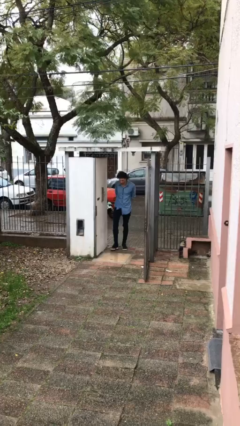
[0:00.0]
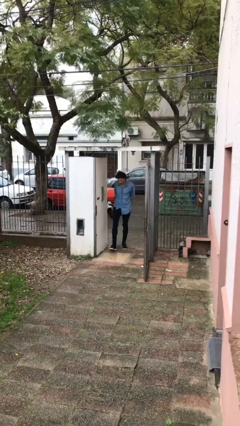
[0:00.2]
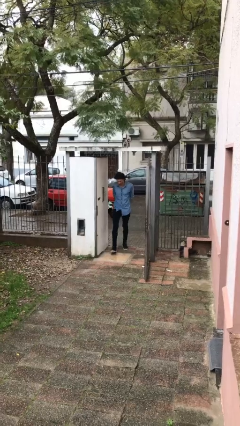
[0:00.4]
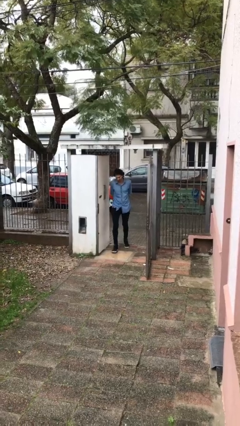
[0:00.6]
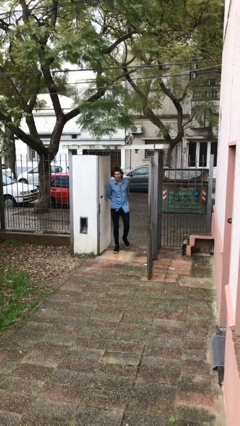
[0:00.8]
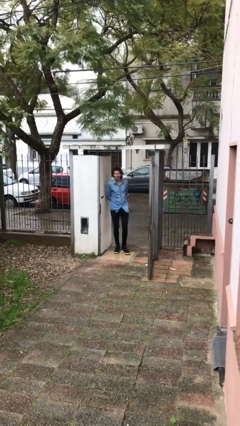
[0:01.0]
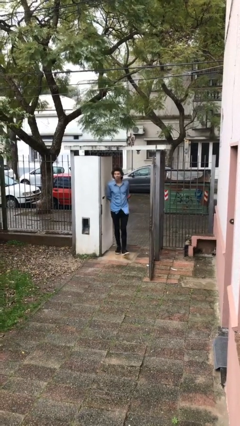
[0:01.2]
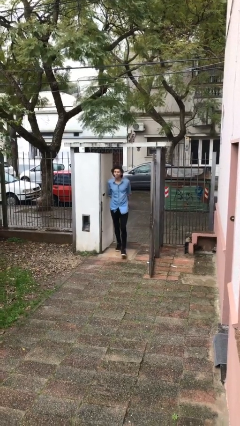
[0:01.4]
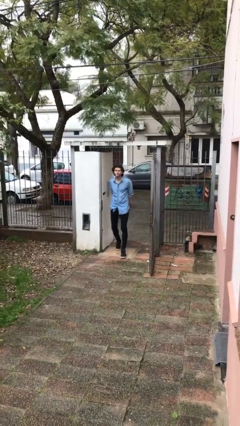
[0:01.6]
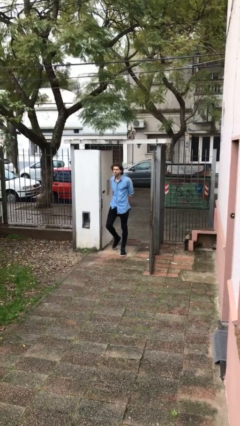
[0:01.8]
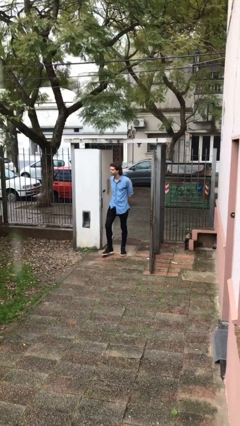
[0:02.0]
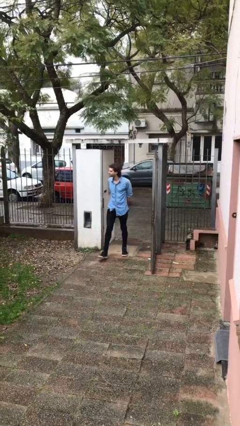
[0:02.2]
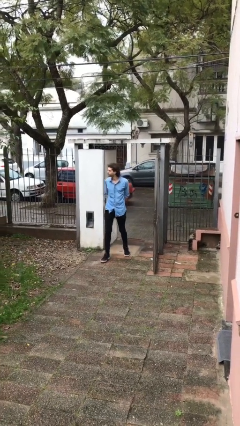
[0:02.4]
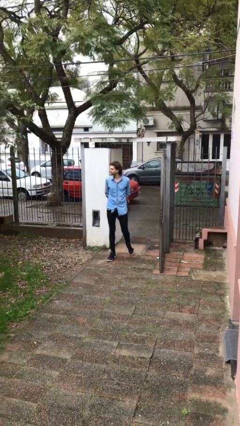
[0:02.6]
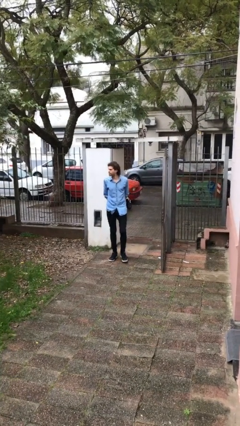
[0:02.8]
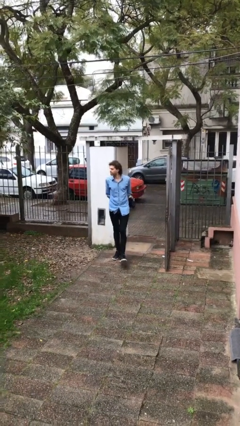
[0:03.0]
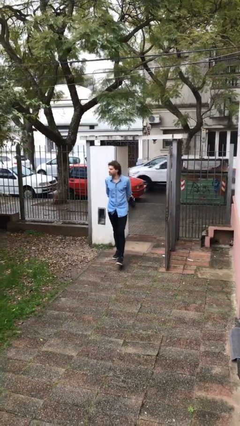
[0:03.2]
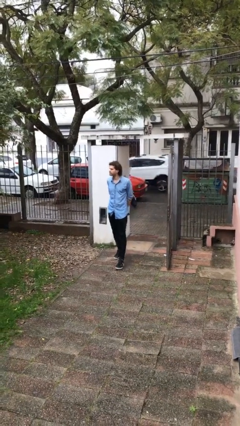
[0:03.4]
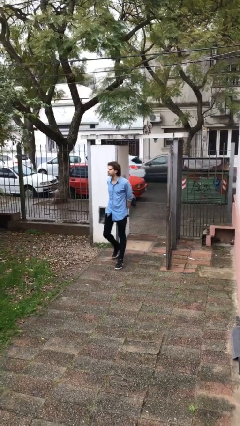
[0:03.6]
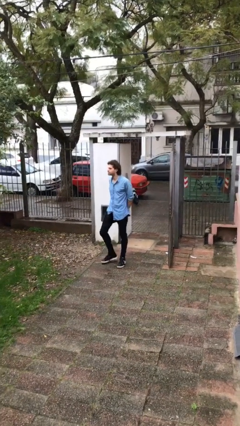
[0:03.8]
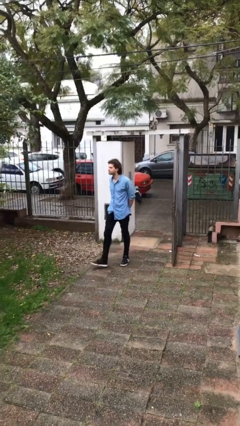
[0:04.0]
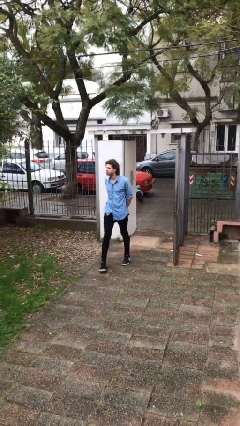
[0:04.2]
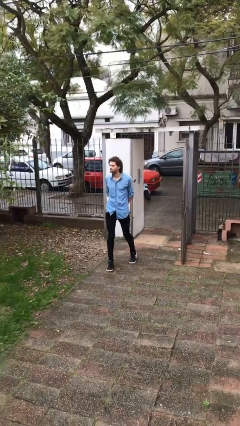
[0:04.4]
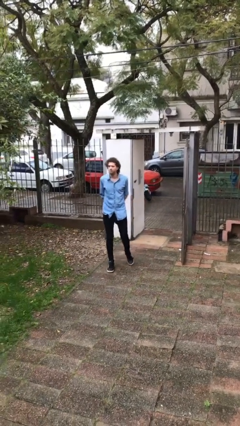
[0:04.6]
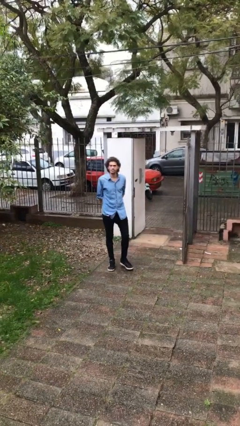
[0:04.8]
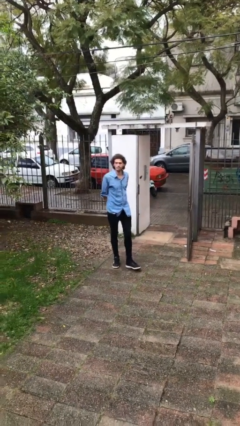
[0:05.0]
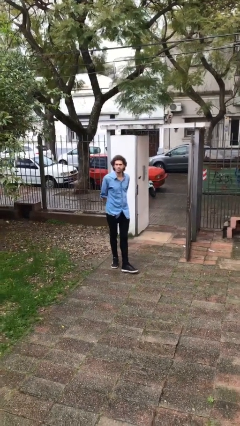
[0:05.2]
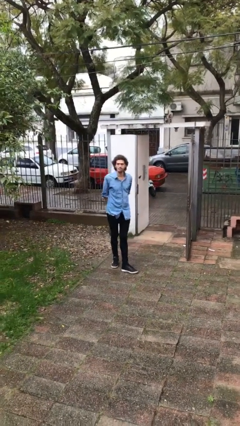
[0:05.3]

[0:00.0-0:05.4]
person enters scene through structure

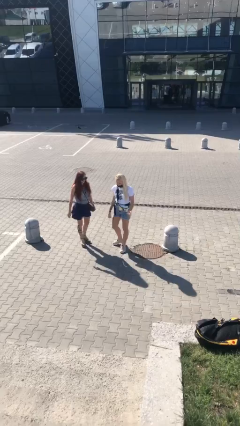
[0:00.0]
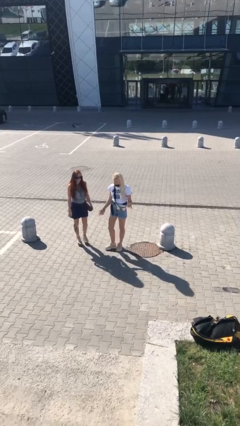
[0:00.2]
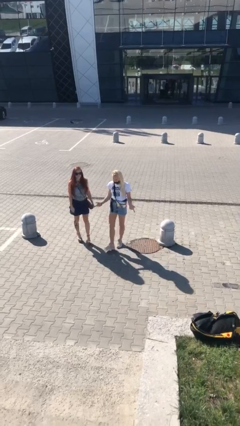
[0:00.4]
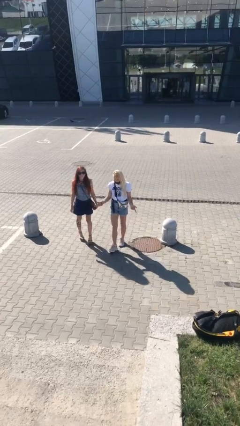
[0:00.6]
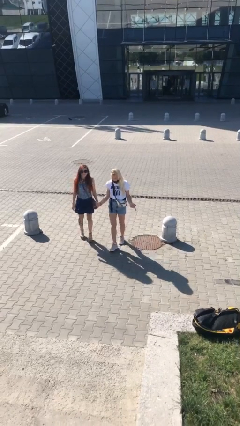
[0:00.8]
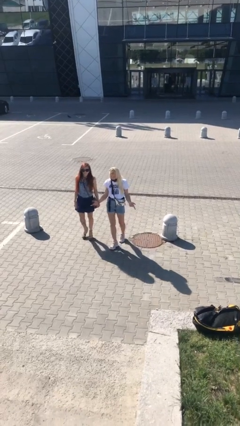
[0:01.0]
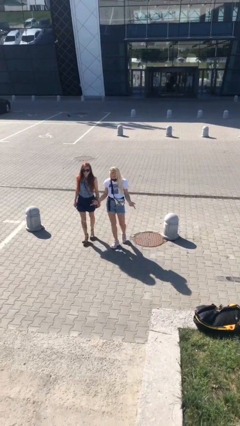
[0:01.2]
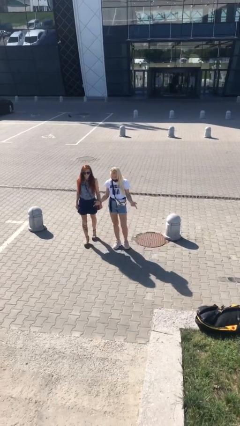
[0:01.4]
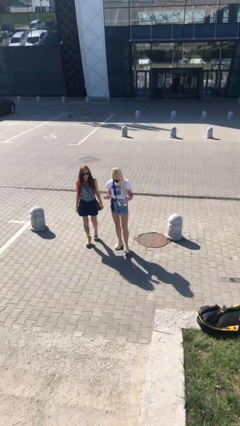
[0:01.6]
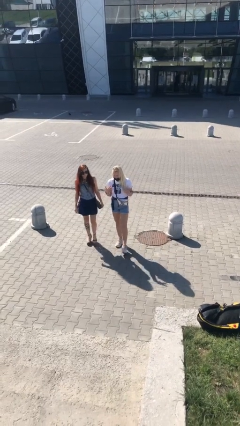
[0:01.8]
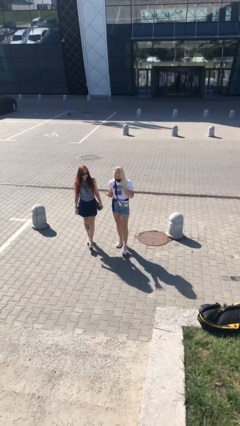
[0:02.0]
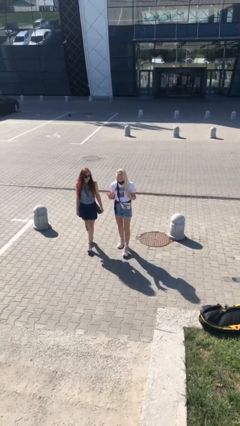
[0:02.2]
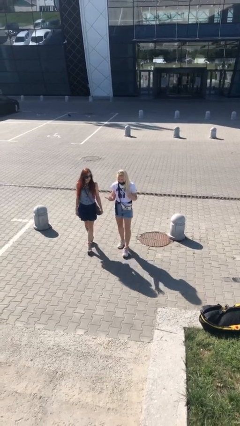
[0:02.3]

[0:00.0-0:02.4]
person talks to person

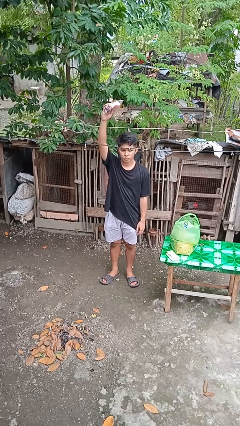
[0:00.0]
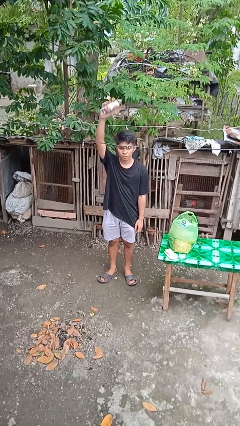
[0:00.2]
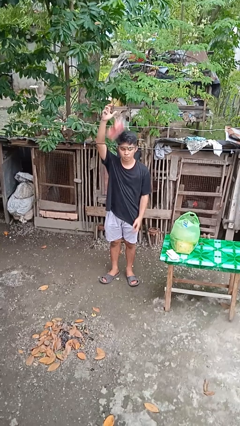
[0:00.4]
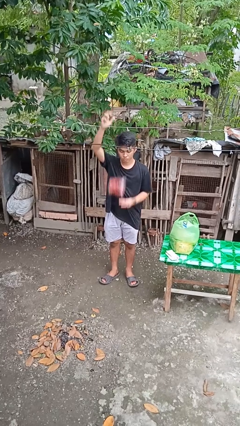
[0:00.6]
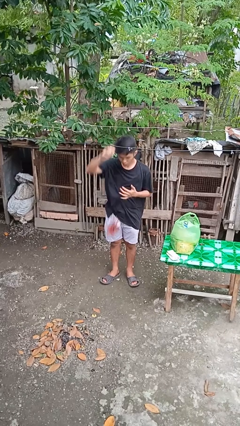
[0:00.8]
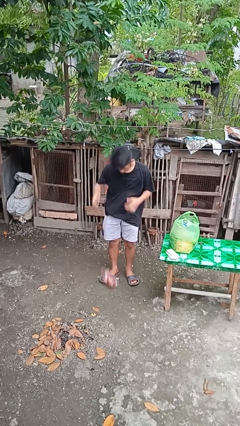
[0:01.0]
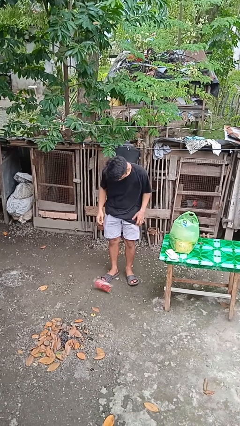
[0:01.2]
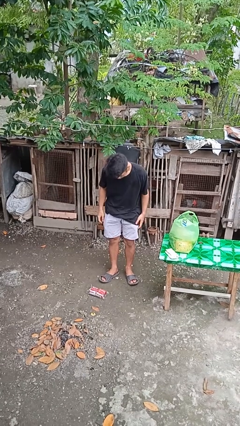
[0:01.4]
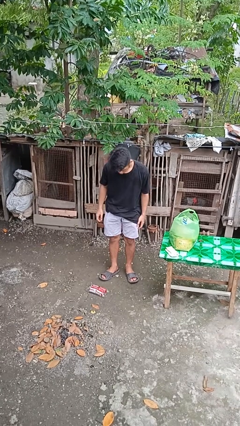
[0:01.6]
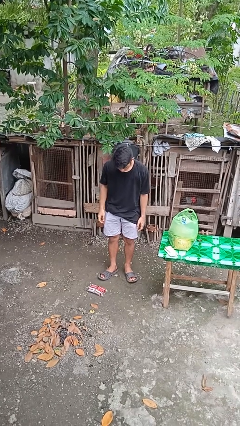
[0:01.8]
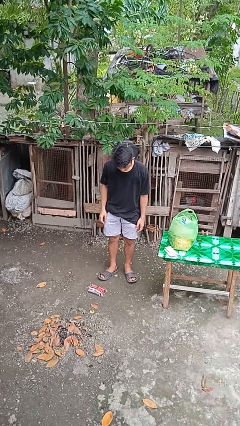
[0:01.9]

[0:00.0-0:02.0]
person drops object

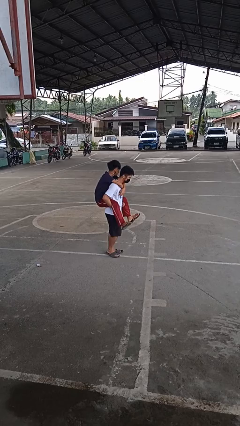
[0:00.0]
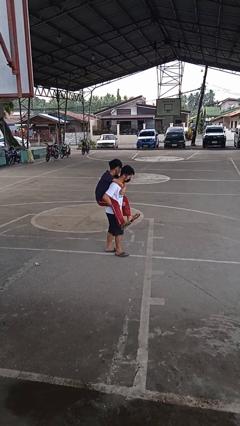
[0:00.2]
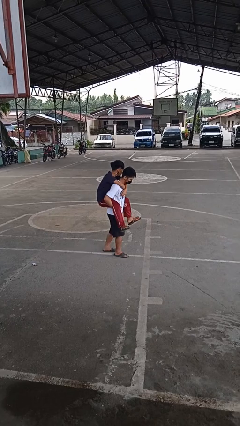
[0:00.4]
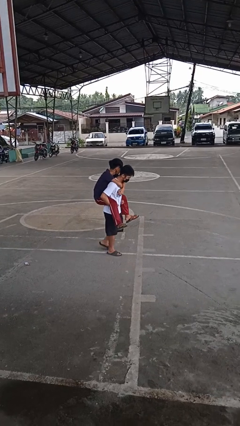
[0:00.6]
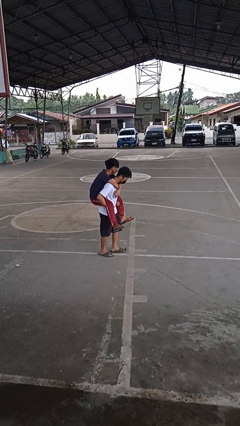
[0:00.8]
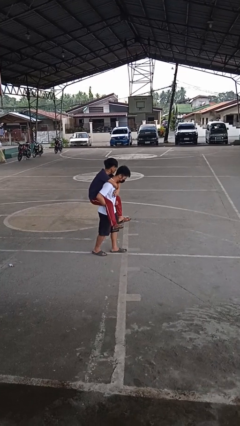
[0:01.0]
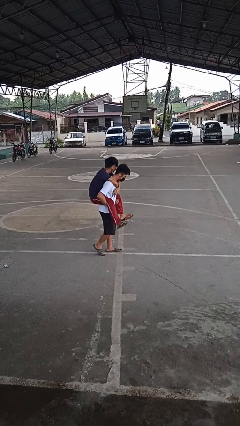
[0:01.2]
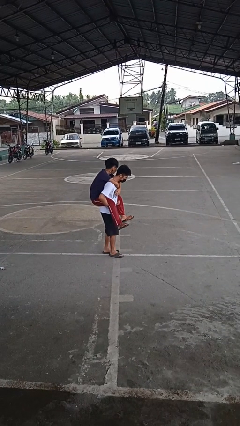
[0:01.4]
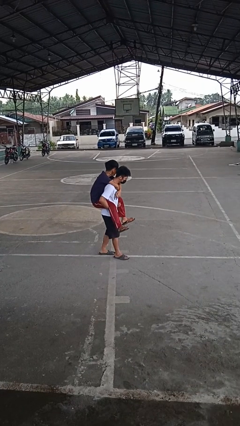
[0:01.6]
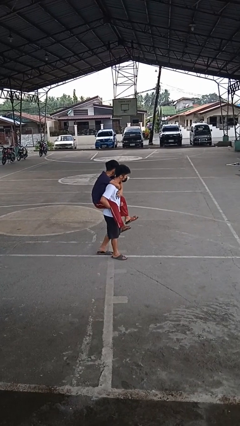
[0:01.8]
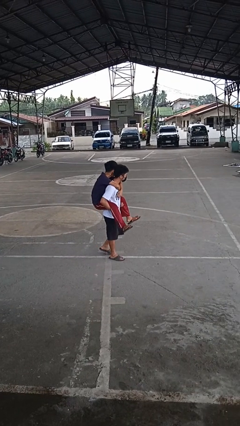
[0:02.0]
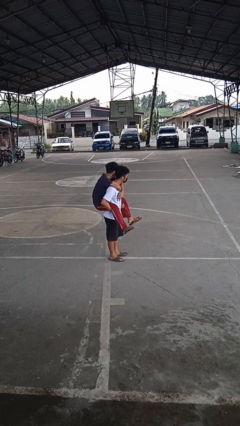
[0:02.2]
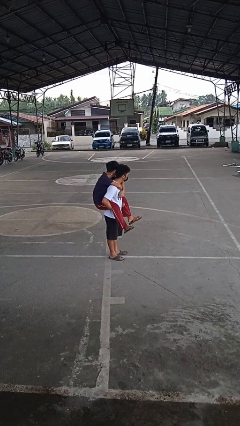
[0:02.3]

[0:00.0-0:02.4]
person carries person on back

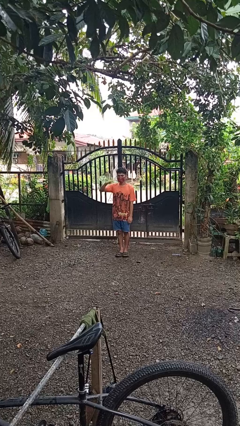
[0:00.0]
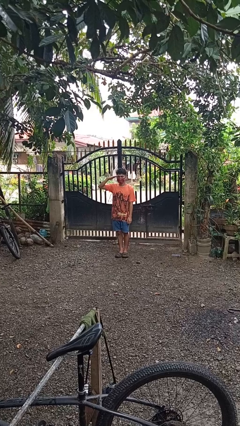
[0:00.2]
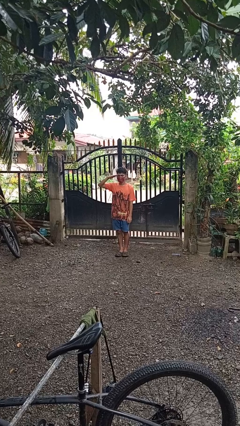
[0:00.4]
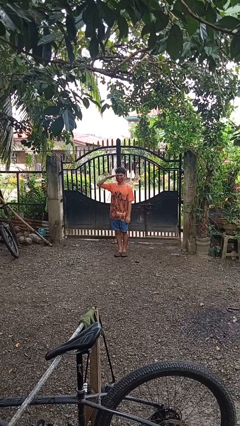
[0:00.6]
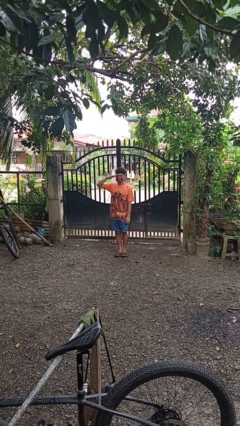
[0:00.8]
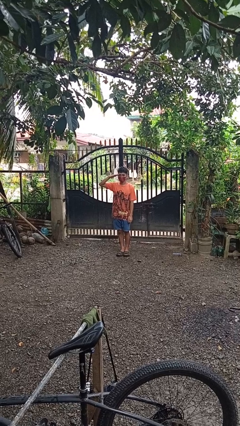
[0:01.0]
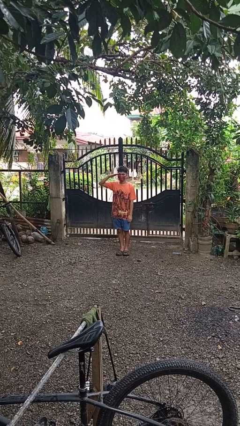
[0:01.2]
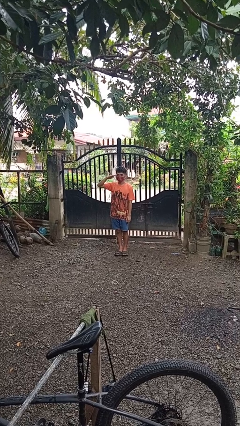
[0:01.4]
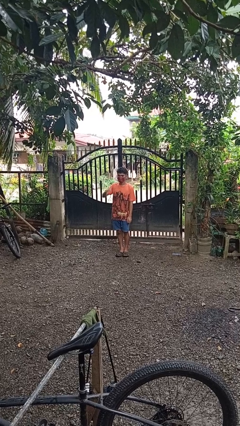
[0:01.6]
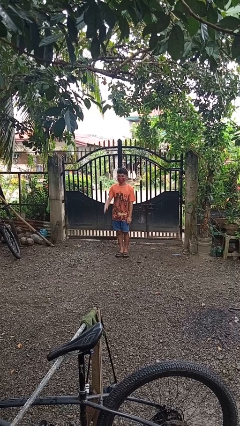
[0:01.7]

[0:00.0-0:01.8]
person salutes

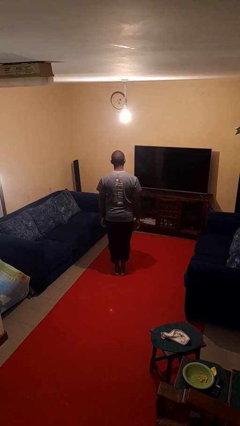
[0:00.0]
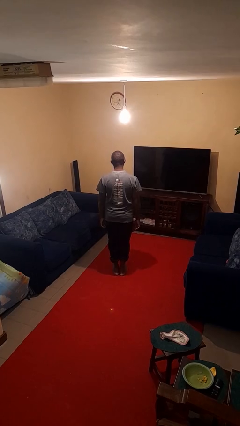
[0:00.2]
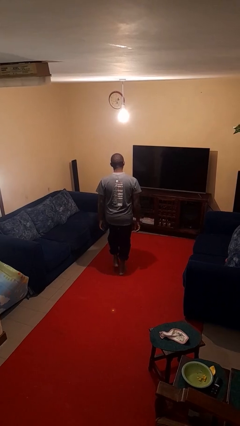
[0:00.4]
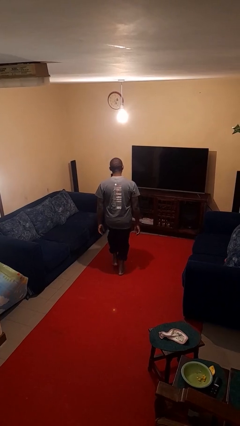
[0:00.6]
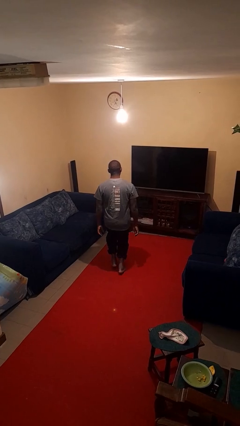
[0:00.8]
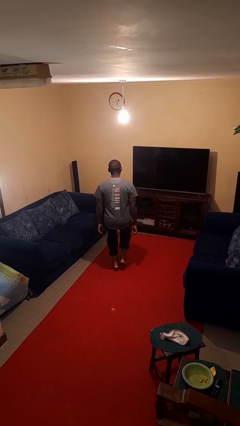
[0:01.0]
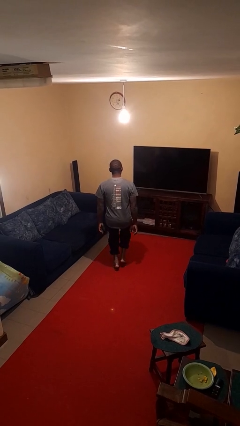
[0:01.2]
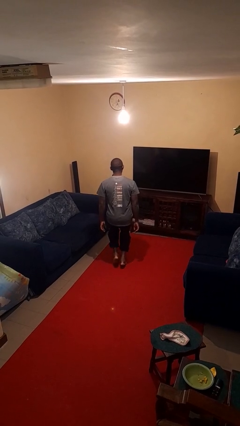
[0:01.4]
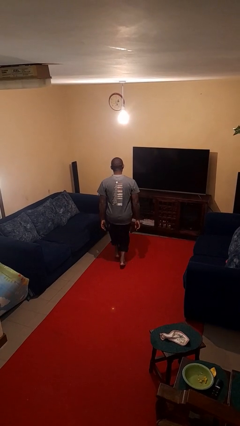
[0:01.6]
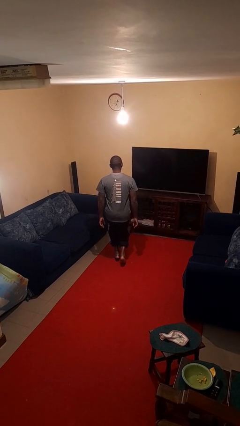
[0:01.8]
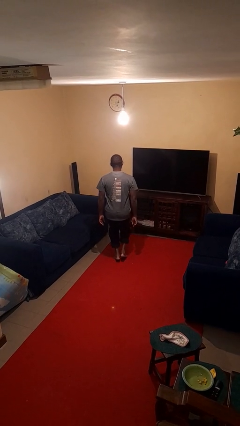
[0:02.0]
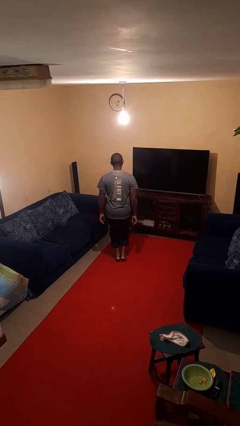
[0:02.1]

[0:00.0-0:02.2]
person walks tiptoe

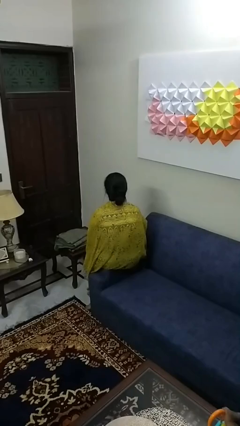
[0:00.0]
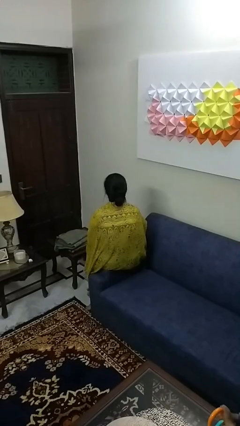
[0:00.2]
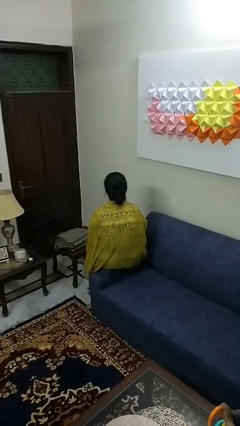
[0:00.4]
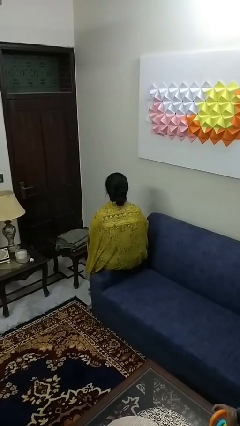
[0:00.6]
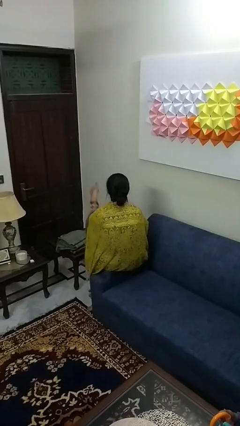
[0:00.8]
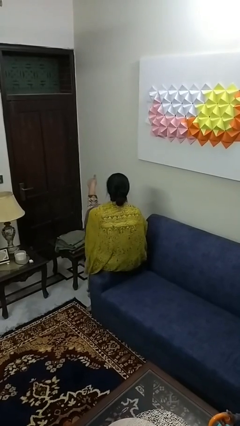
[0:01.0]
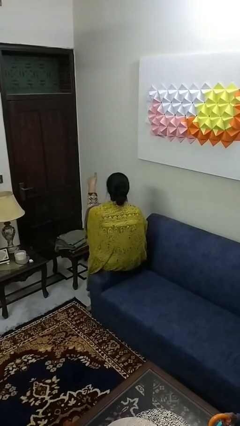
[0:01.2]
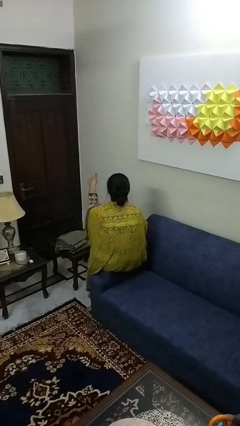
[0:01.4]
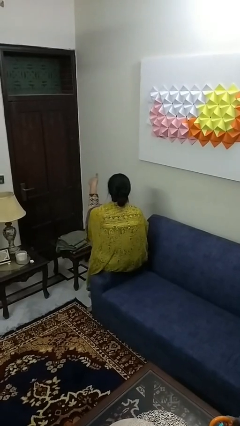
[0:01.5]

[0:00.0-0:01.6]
person gestures thumbs up
